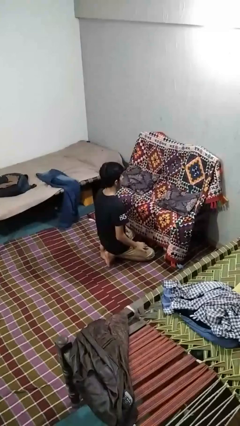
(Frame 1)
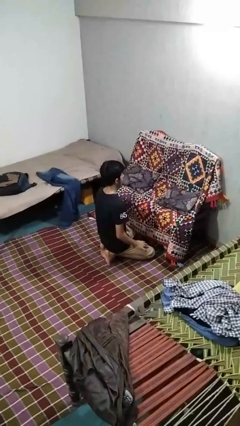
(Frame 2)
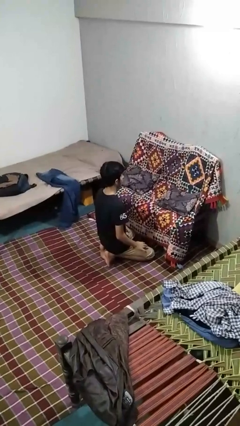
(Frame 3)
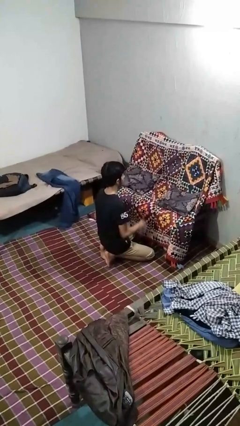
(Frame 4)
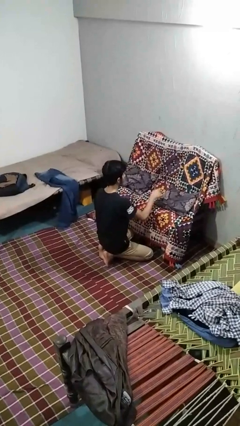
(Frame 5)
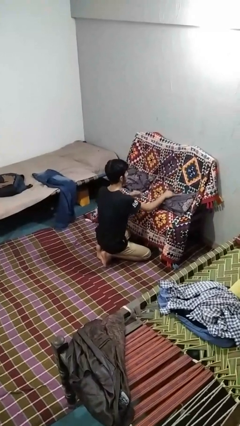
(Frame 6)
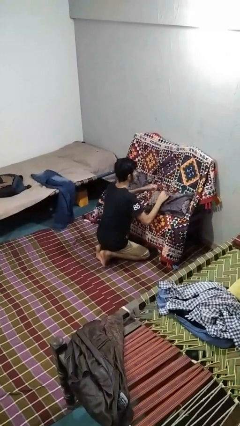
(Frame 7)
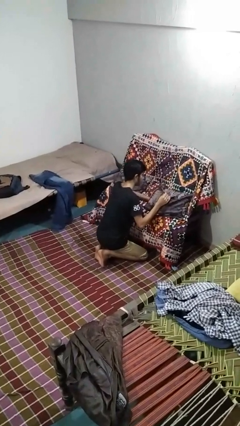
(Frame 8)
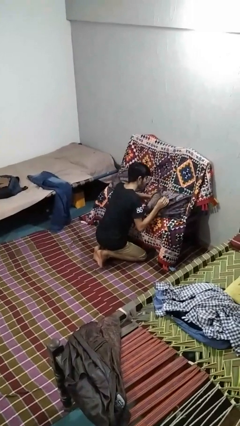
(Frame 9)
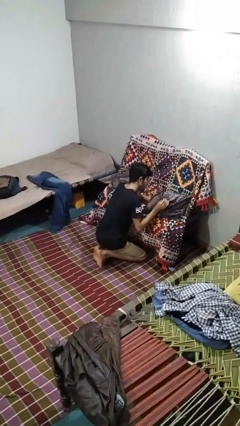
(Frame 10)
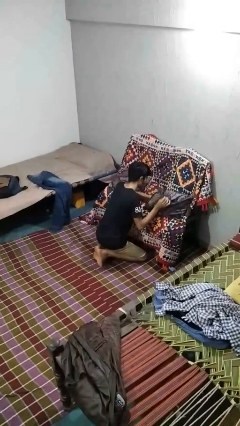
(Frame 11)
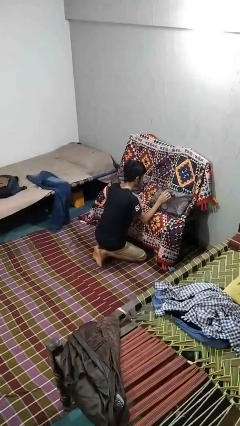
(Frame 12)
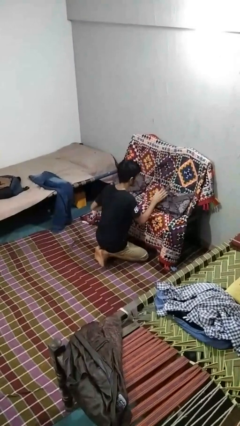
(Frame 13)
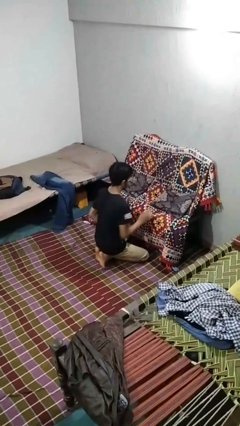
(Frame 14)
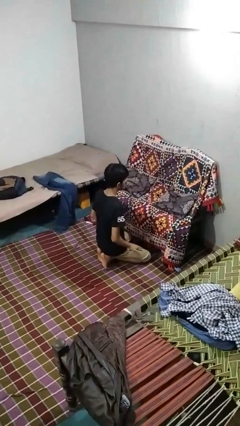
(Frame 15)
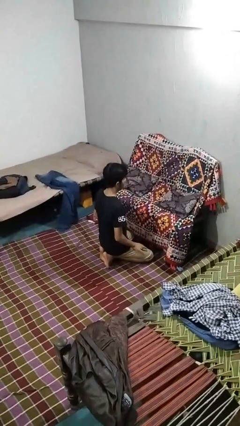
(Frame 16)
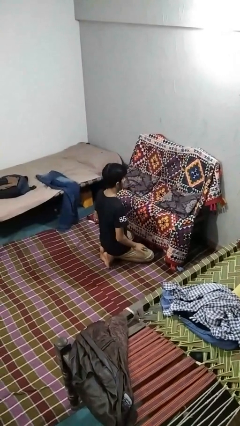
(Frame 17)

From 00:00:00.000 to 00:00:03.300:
person searches in couch

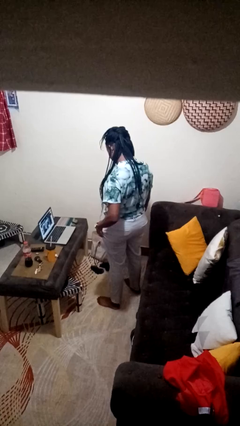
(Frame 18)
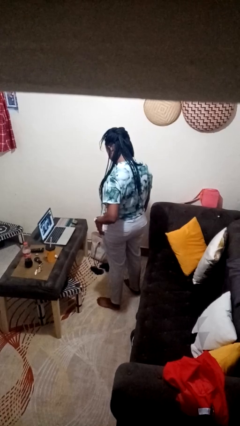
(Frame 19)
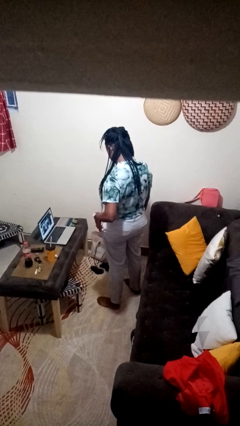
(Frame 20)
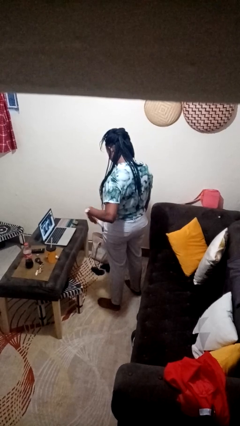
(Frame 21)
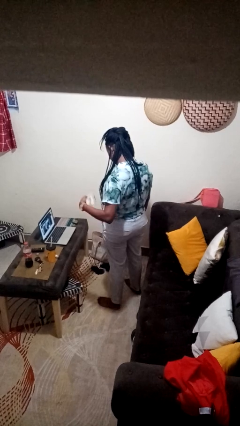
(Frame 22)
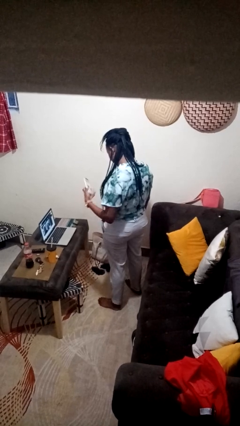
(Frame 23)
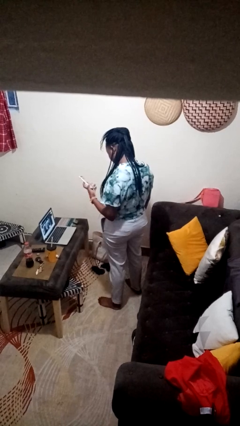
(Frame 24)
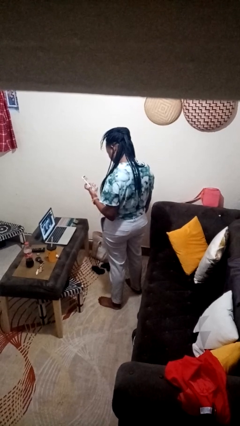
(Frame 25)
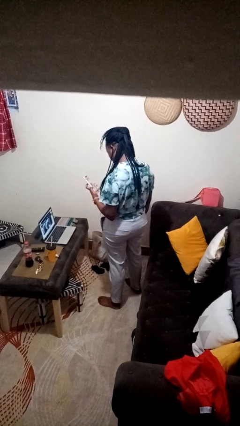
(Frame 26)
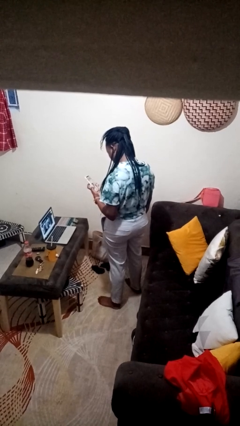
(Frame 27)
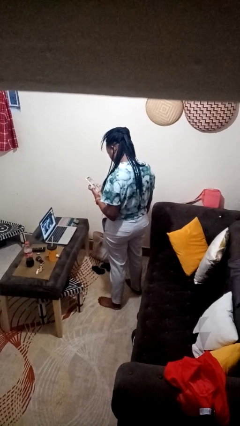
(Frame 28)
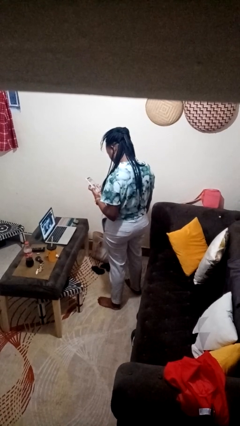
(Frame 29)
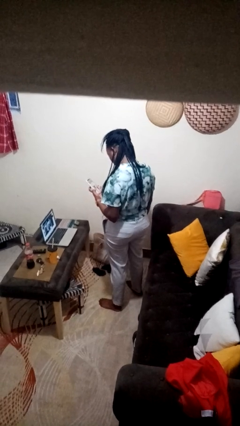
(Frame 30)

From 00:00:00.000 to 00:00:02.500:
person takes phone from pocket

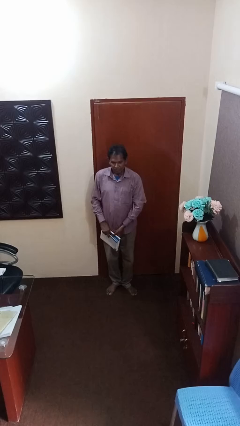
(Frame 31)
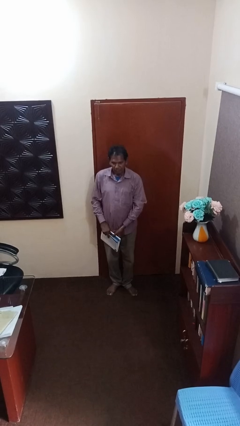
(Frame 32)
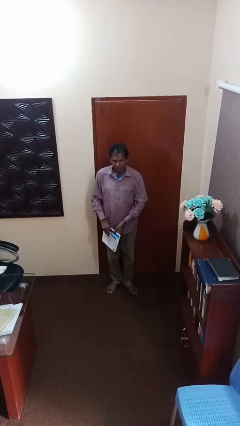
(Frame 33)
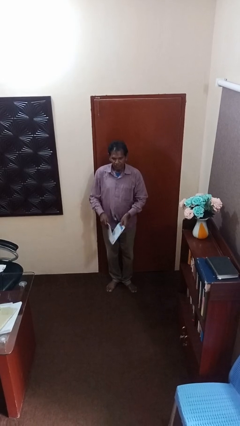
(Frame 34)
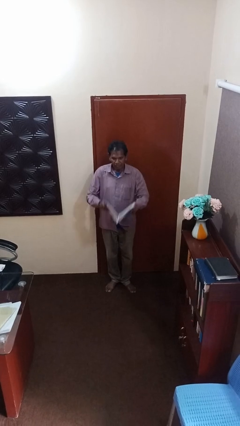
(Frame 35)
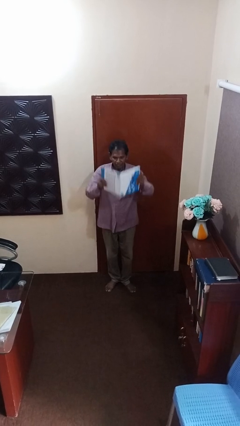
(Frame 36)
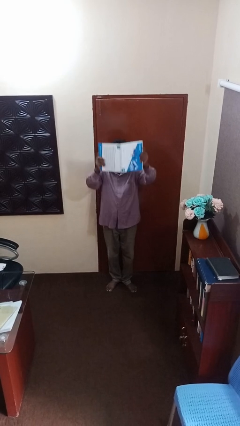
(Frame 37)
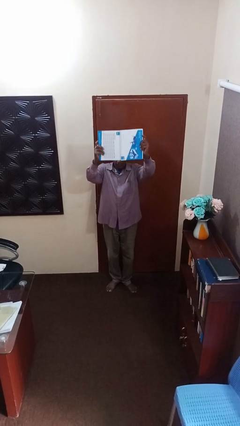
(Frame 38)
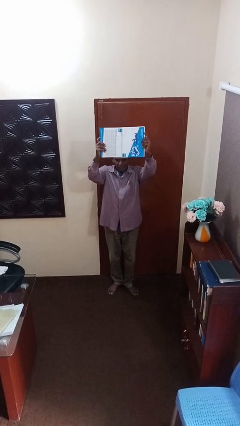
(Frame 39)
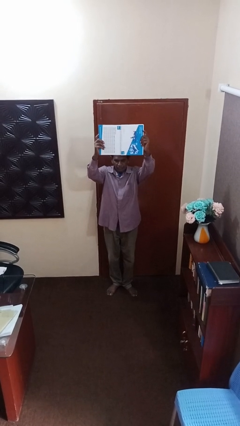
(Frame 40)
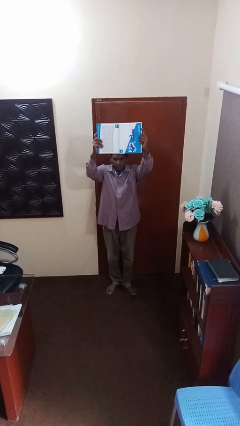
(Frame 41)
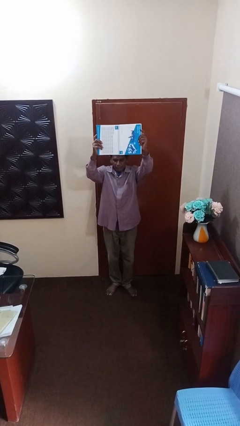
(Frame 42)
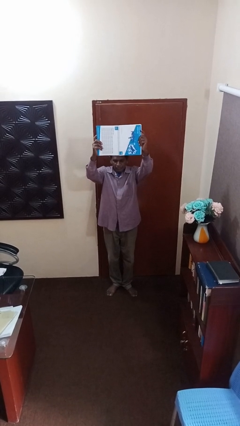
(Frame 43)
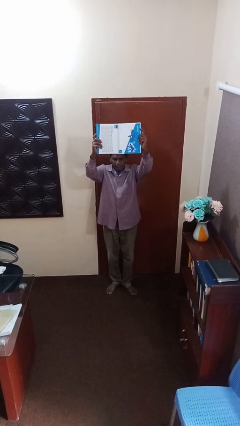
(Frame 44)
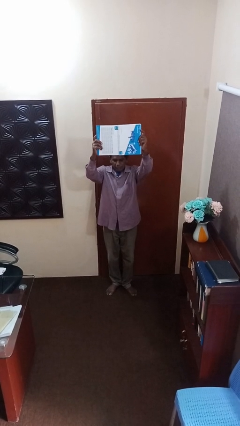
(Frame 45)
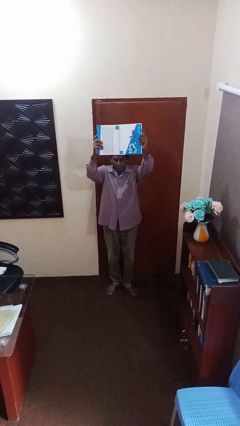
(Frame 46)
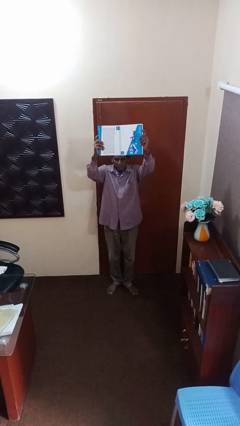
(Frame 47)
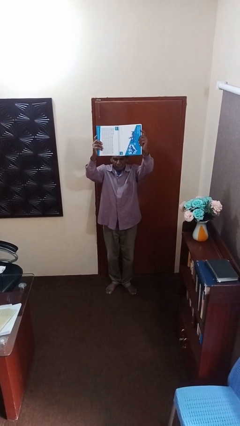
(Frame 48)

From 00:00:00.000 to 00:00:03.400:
person holds object above head

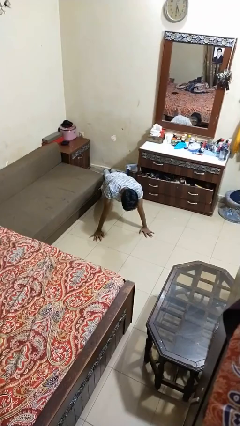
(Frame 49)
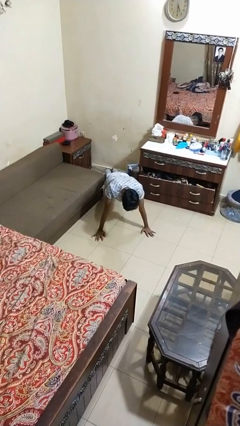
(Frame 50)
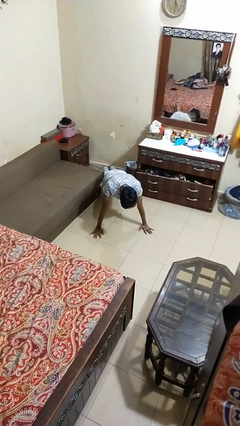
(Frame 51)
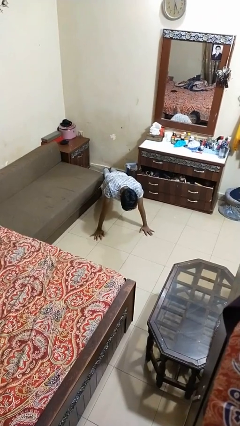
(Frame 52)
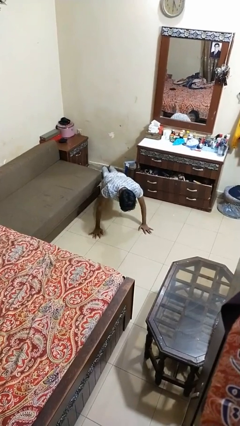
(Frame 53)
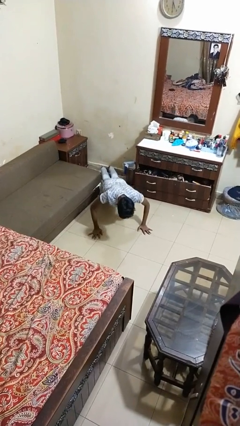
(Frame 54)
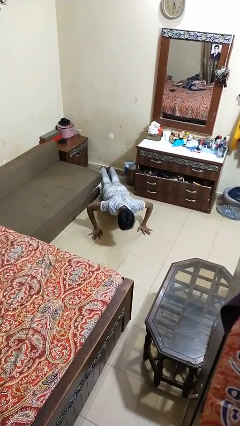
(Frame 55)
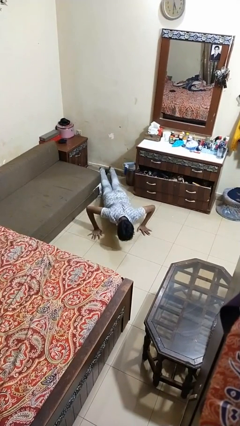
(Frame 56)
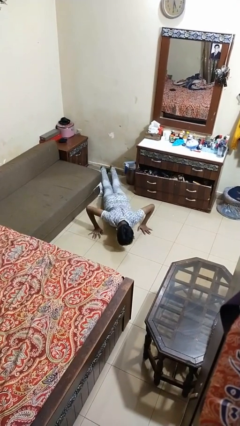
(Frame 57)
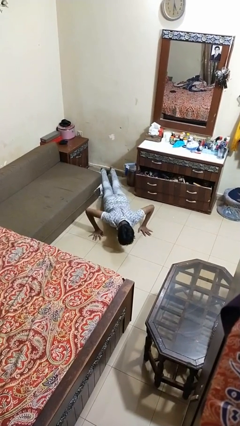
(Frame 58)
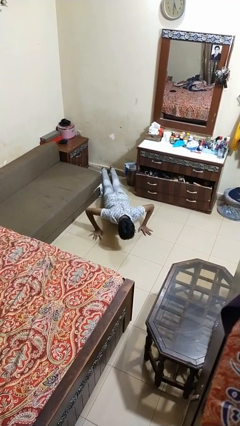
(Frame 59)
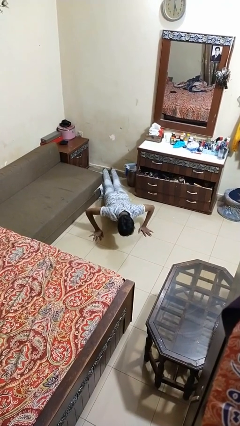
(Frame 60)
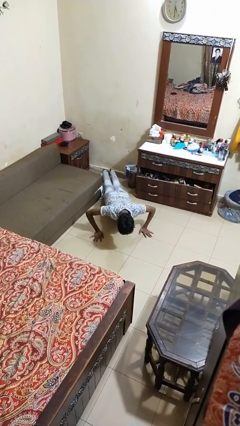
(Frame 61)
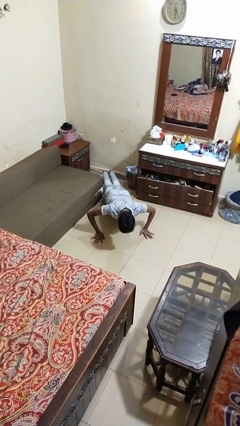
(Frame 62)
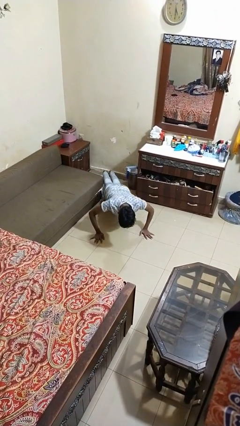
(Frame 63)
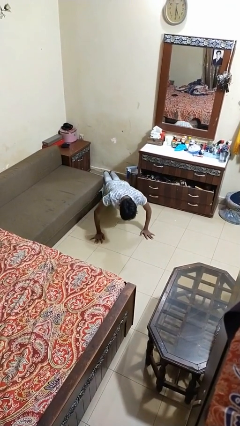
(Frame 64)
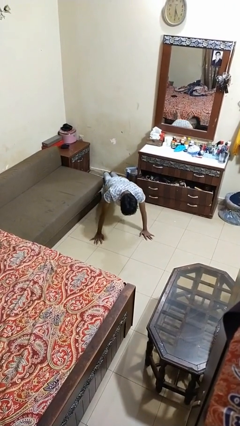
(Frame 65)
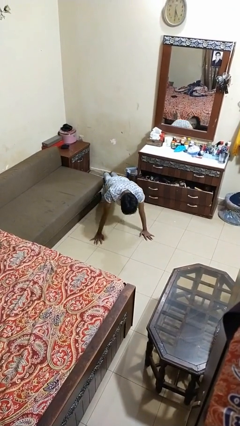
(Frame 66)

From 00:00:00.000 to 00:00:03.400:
person exercises with pushup

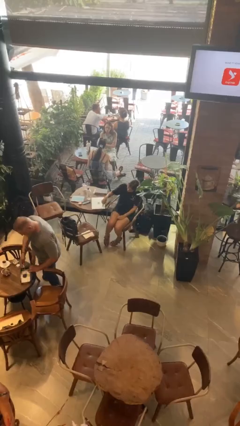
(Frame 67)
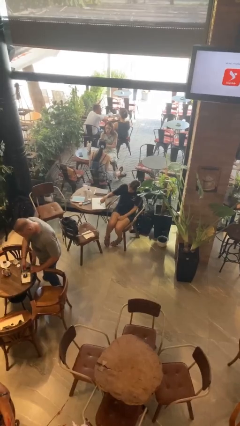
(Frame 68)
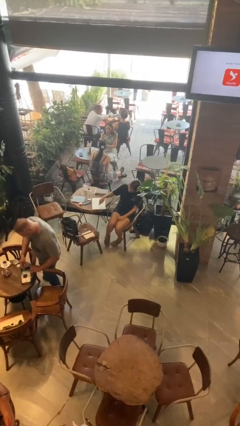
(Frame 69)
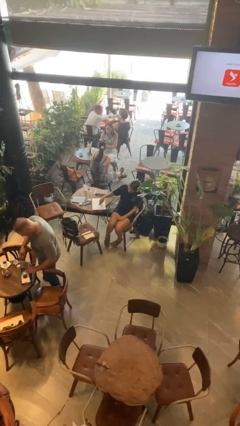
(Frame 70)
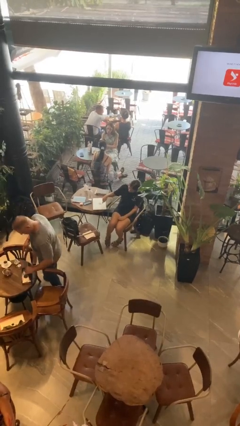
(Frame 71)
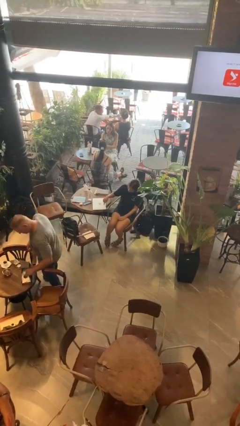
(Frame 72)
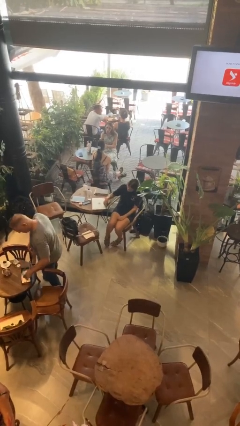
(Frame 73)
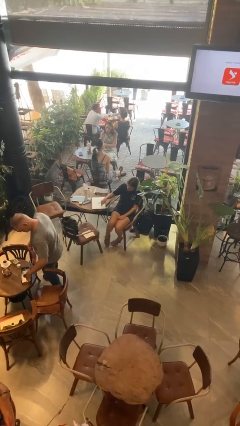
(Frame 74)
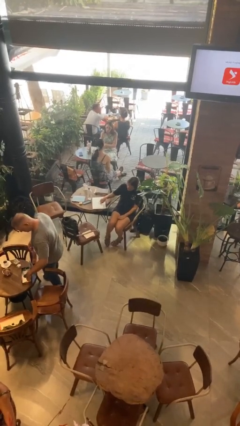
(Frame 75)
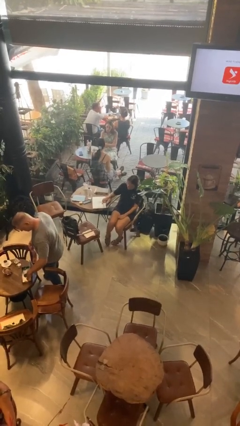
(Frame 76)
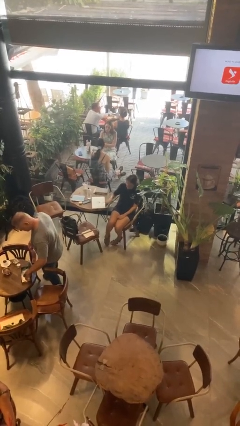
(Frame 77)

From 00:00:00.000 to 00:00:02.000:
person taps object with finger

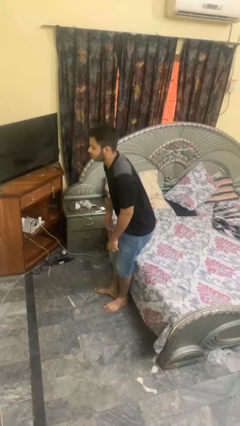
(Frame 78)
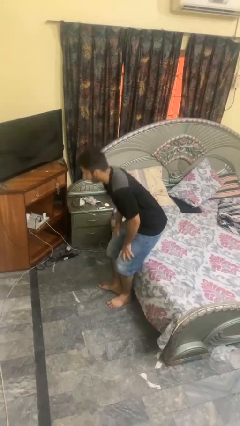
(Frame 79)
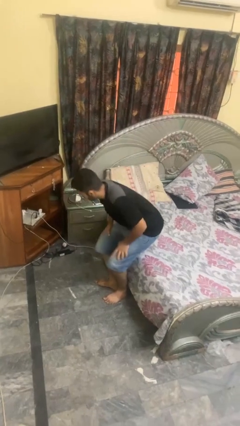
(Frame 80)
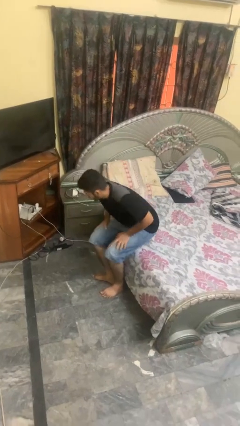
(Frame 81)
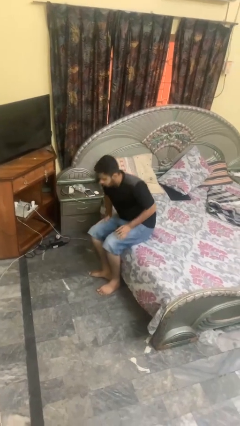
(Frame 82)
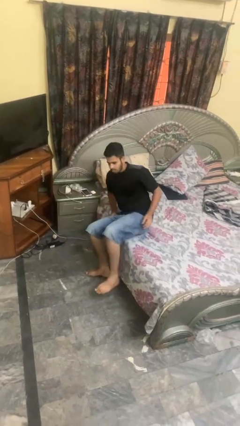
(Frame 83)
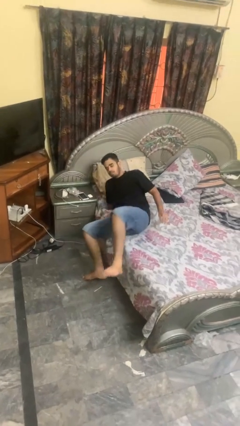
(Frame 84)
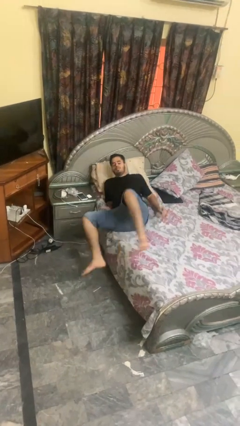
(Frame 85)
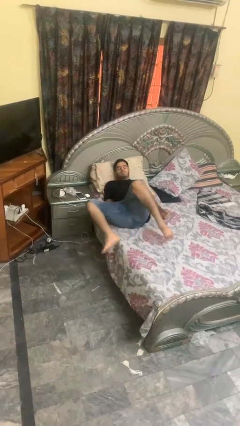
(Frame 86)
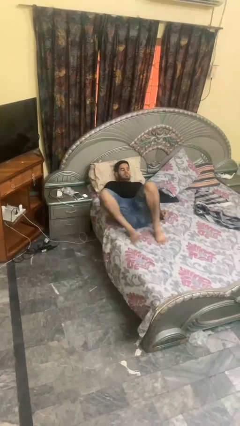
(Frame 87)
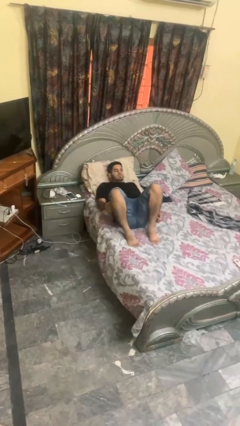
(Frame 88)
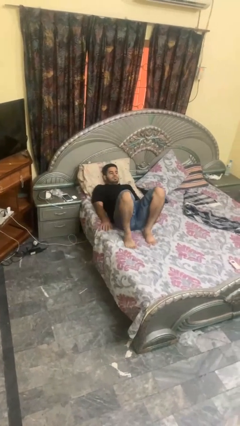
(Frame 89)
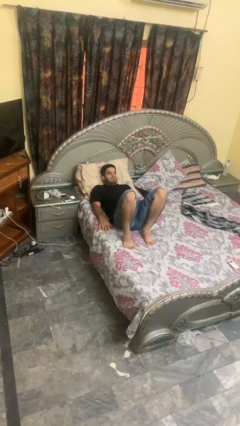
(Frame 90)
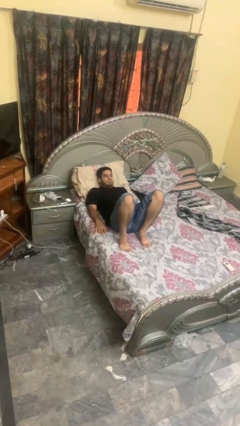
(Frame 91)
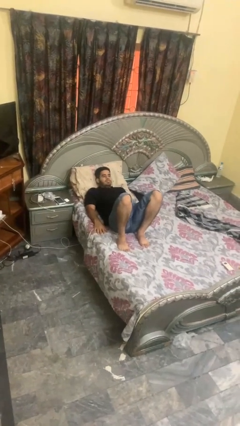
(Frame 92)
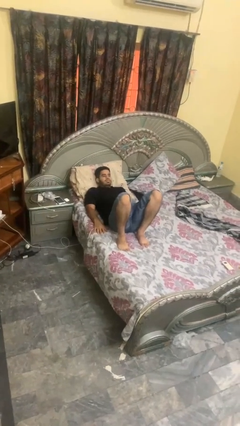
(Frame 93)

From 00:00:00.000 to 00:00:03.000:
person lies down on bed
